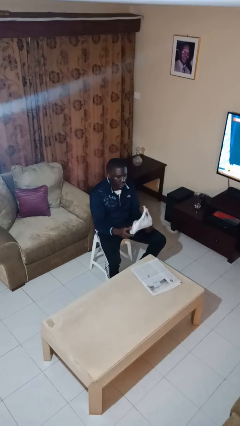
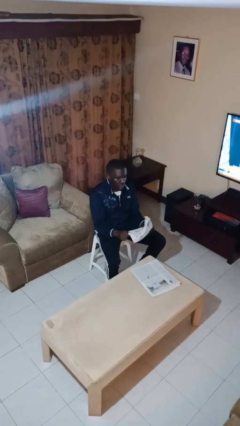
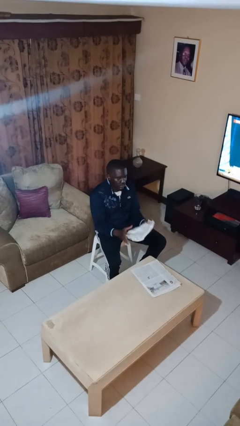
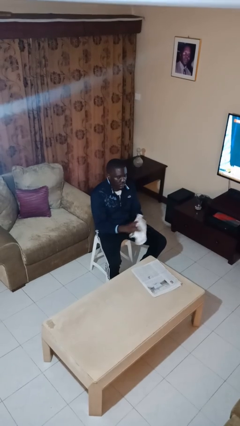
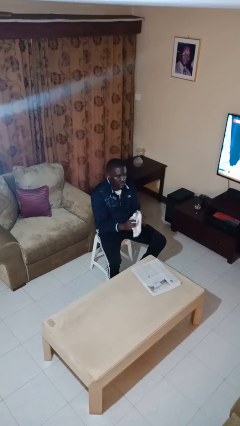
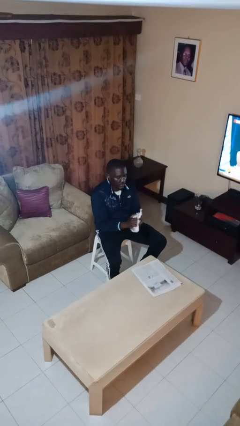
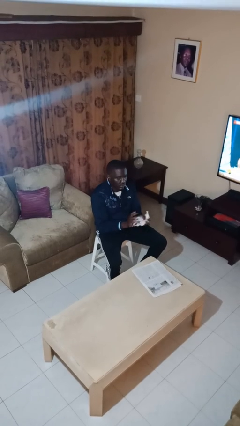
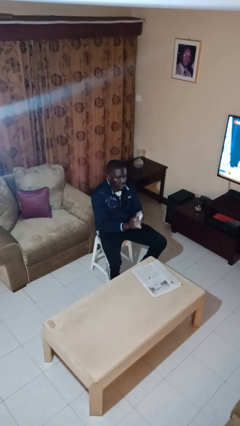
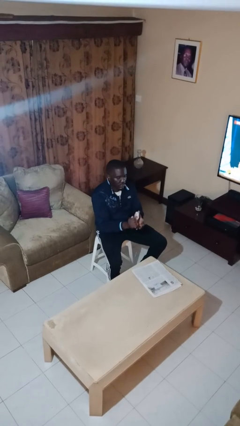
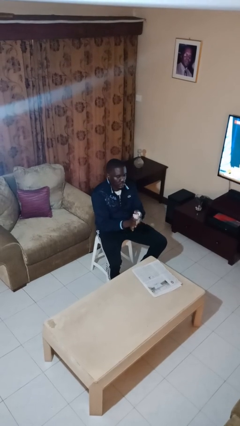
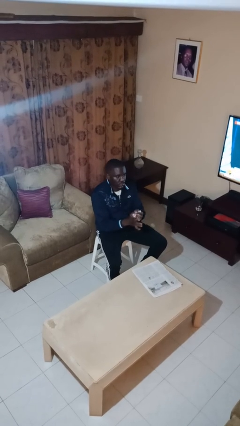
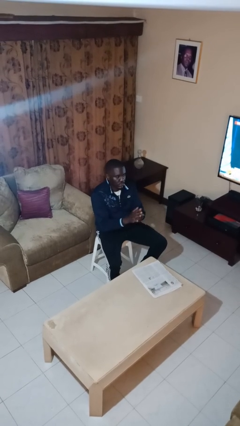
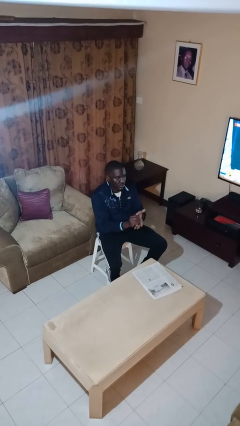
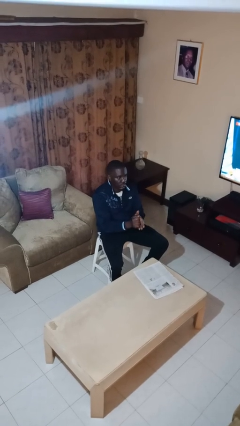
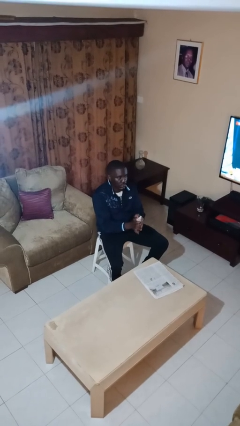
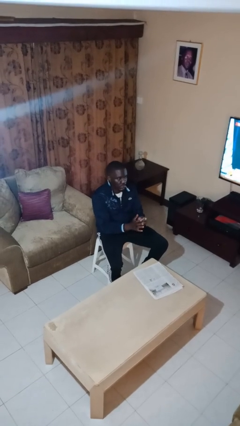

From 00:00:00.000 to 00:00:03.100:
person crumples paper

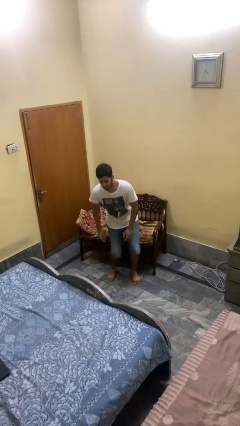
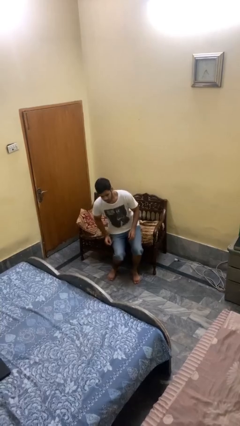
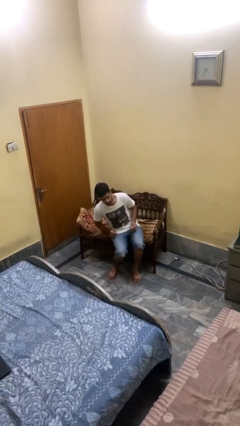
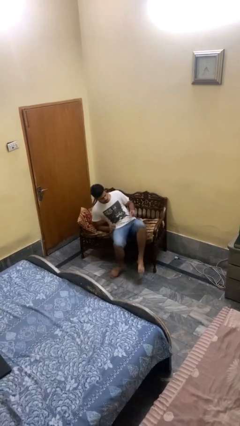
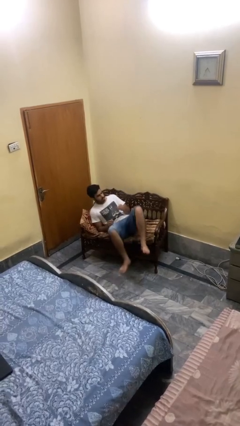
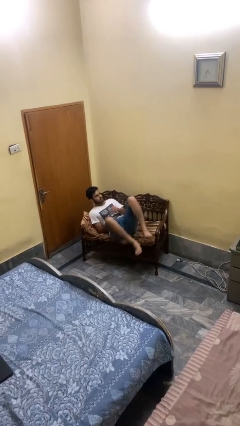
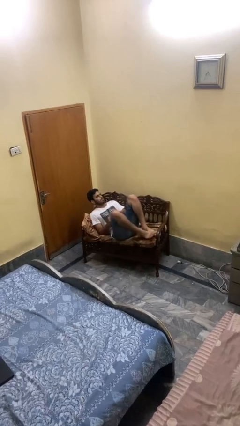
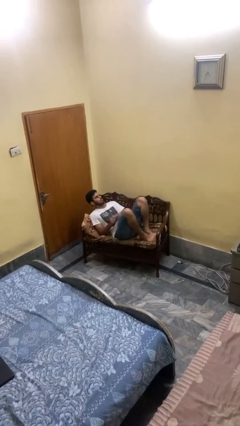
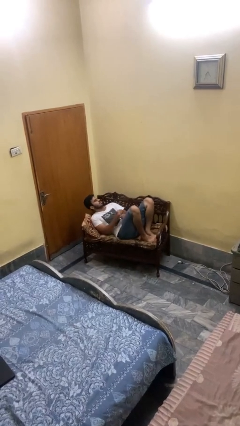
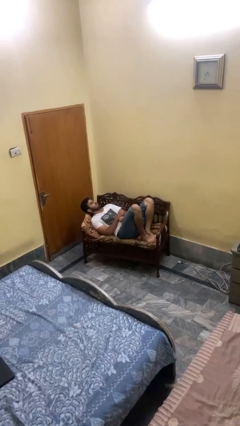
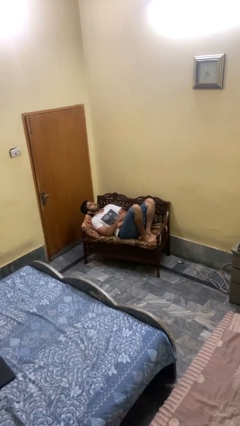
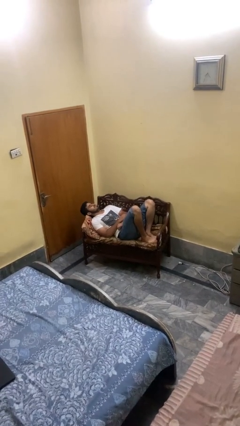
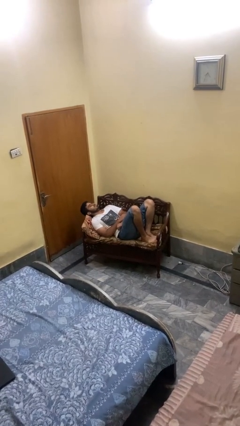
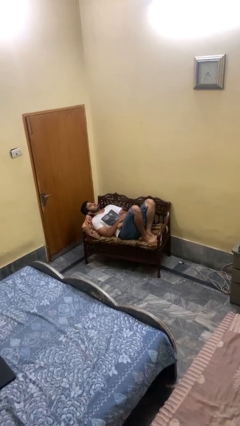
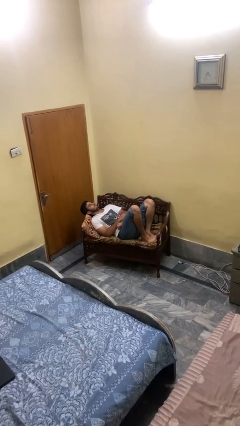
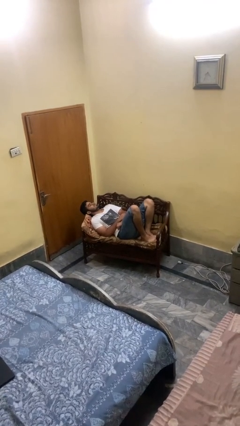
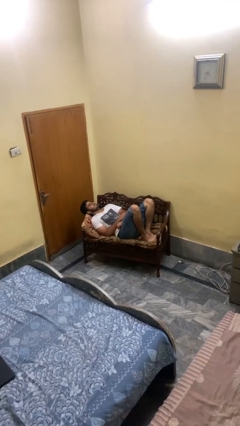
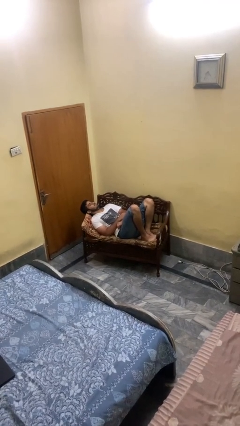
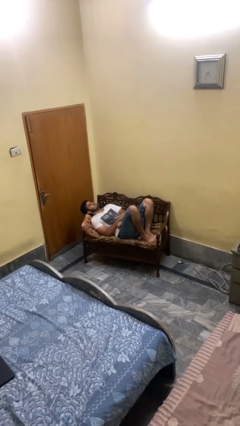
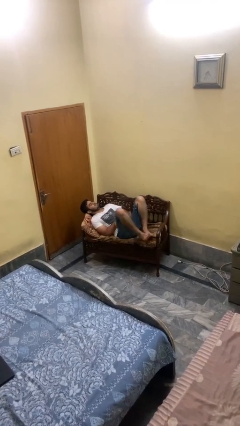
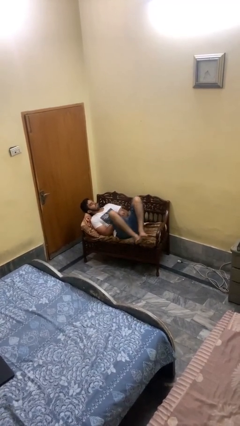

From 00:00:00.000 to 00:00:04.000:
person lies down on couch

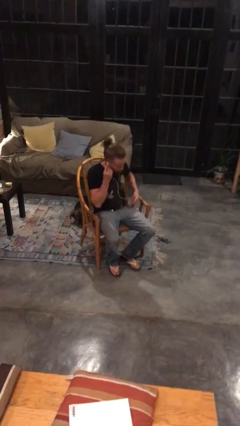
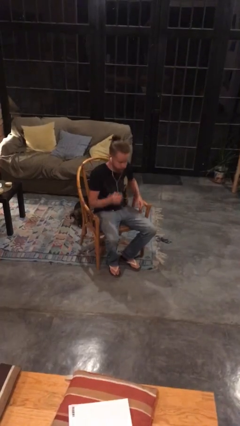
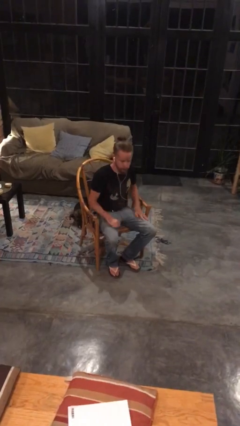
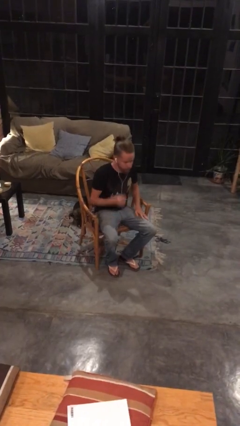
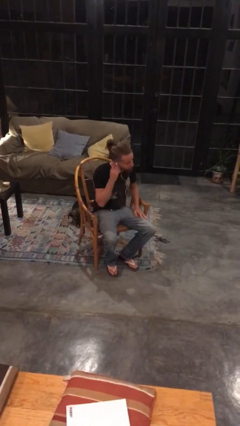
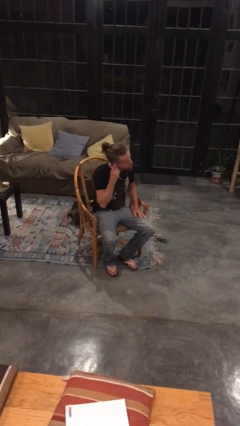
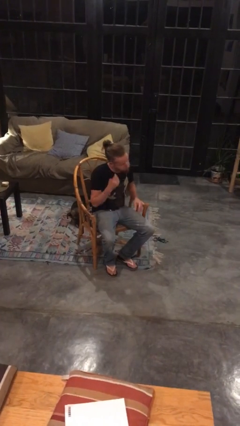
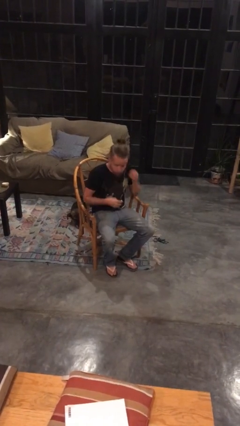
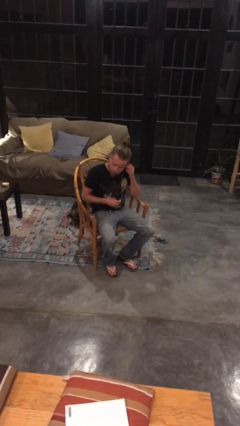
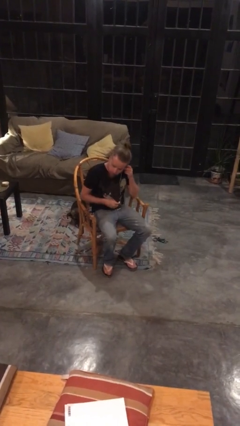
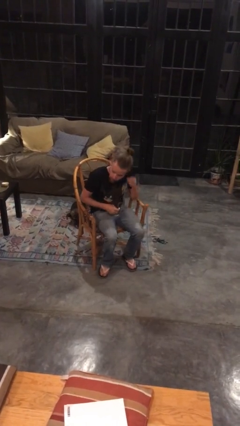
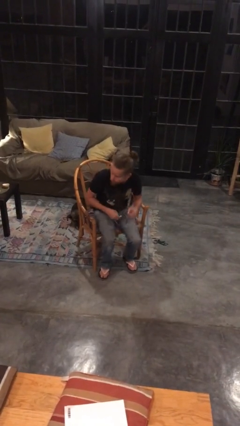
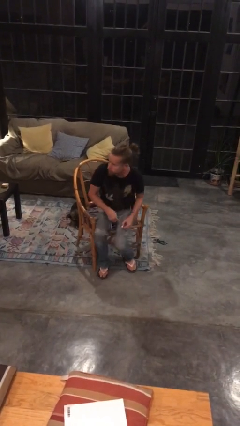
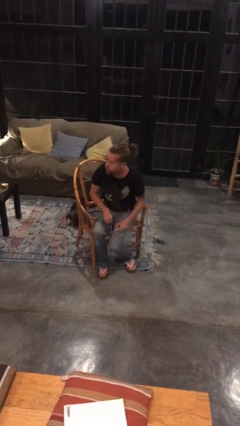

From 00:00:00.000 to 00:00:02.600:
person takes off headphones

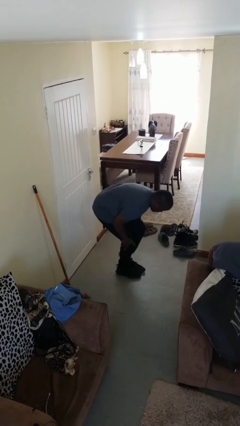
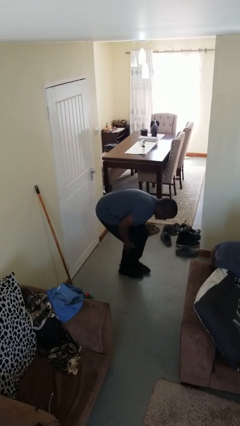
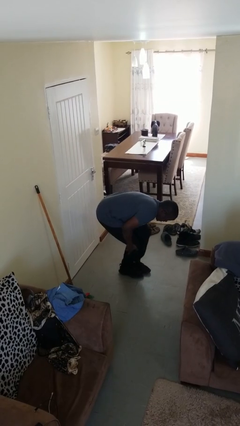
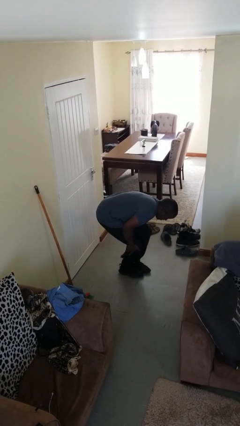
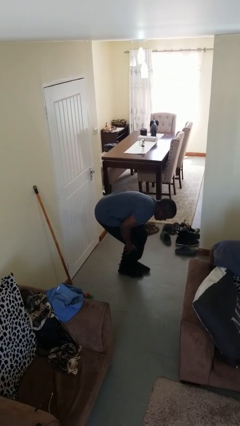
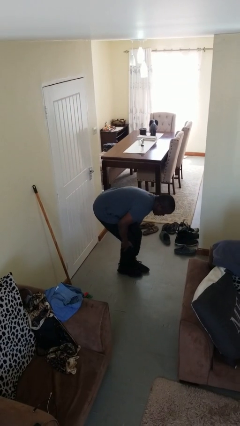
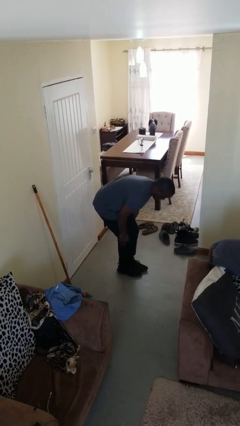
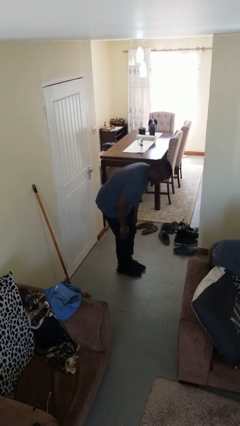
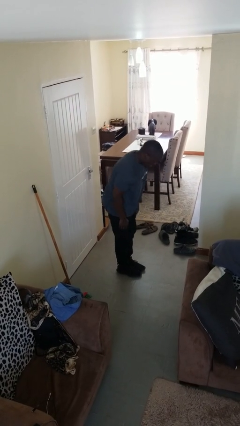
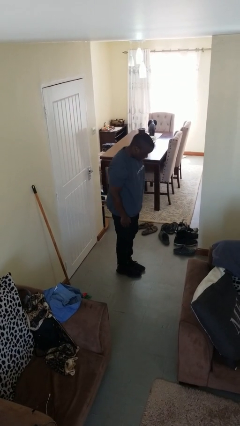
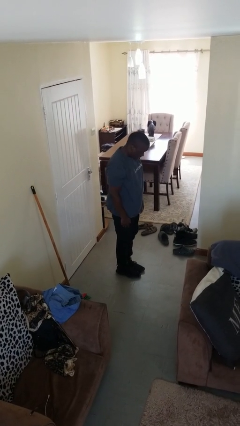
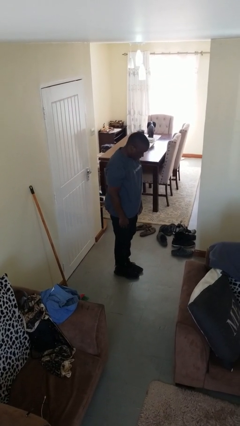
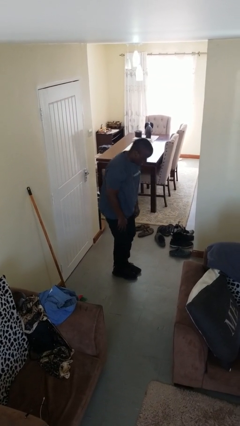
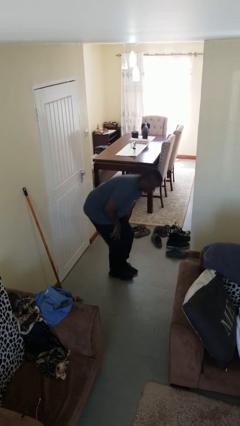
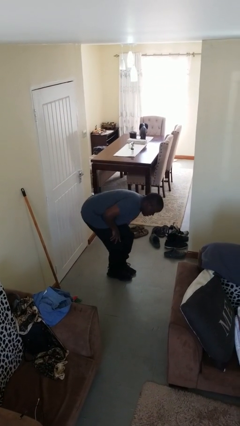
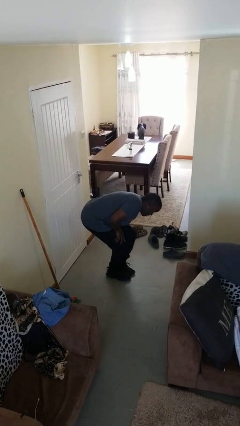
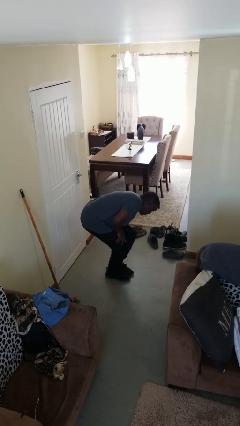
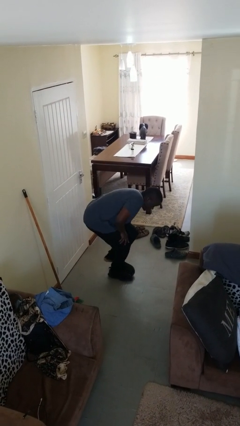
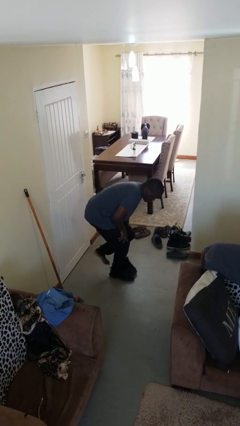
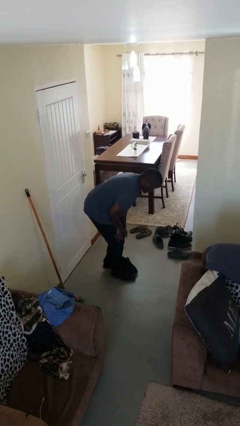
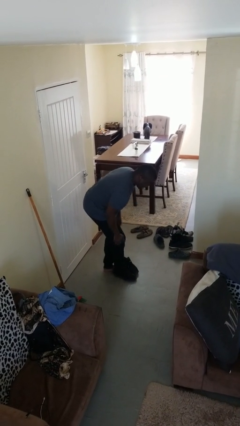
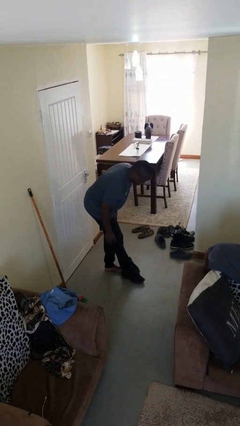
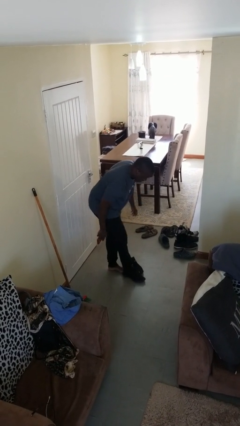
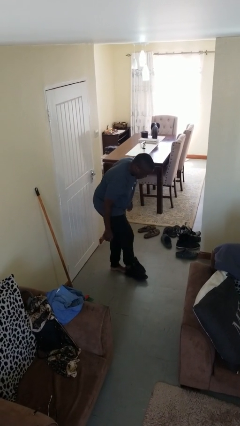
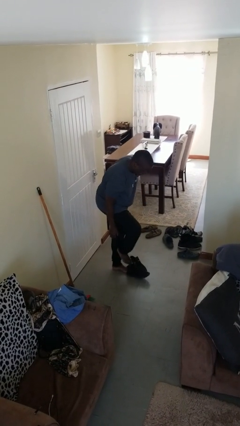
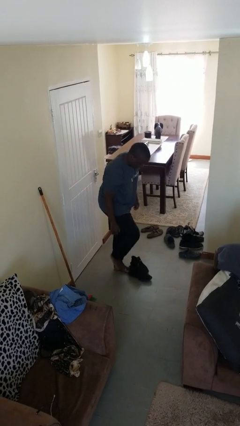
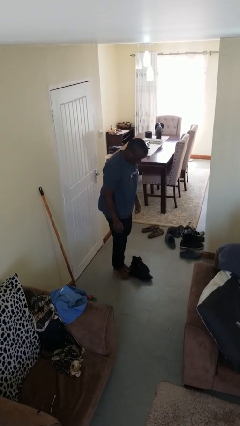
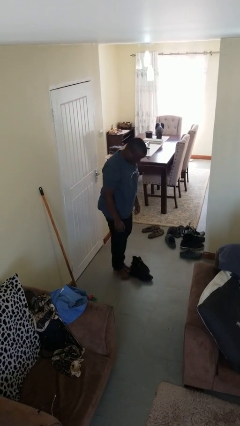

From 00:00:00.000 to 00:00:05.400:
person takes off shoes

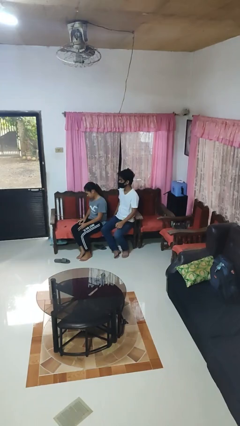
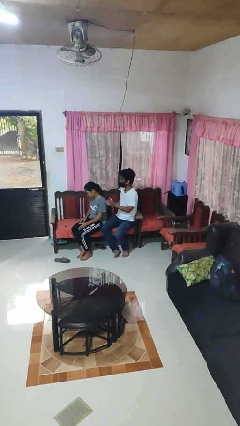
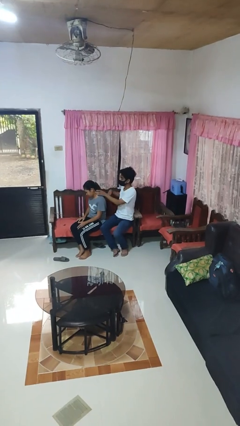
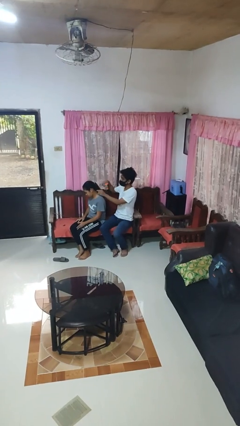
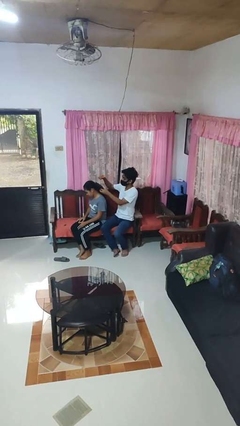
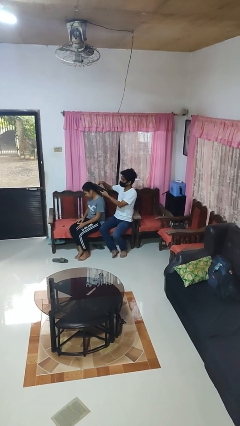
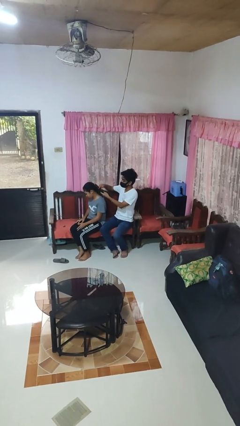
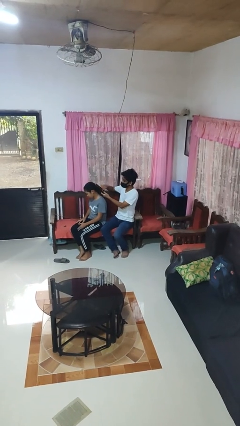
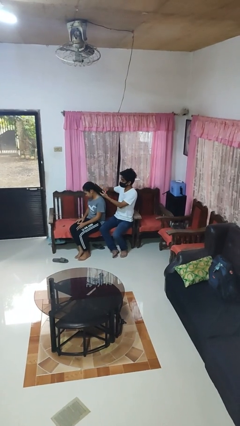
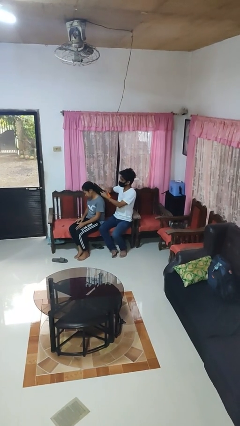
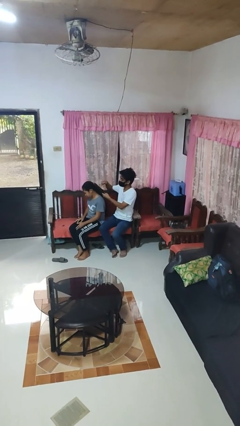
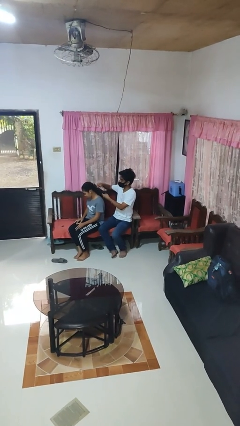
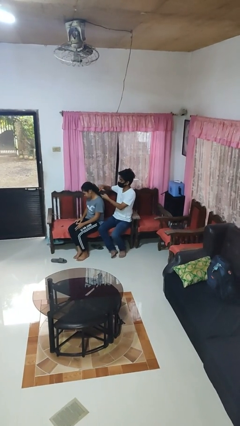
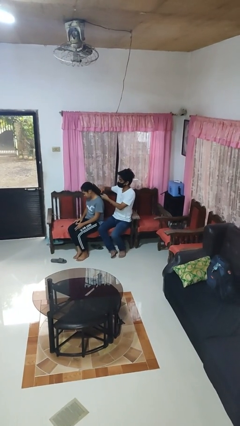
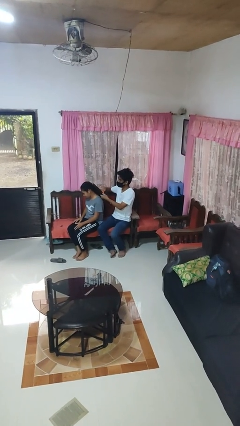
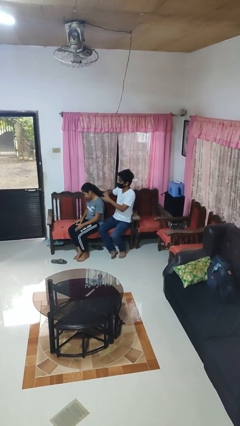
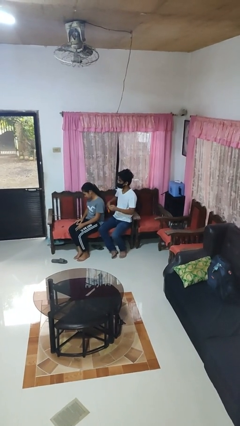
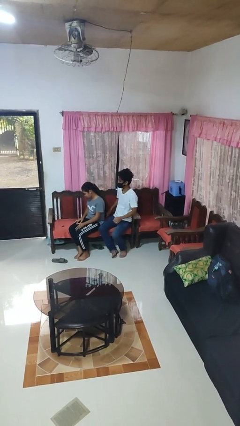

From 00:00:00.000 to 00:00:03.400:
person brushes hair of person
